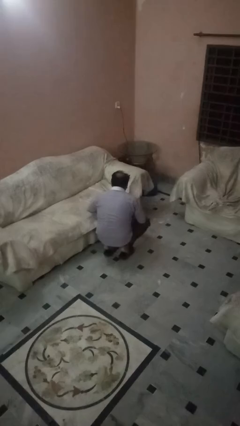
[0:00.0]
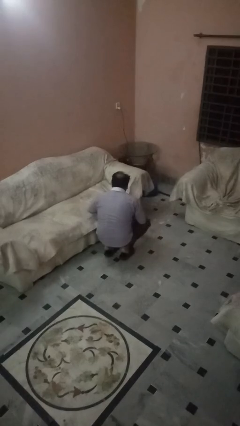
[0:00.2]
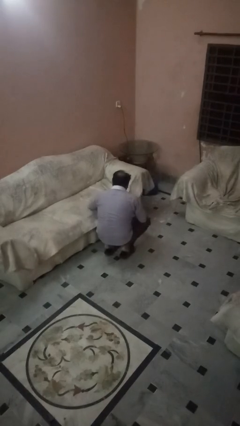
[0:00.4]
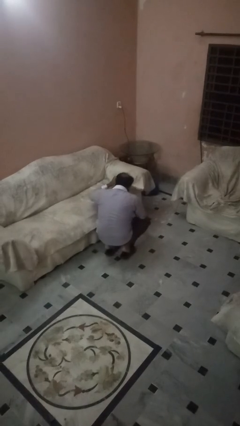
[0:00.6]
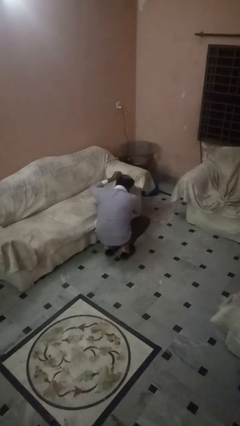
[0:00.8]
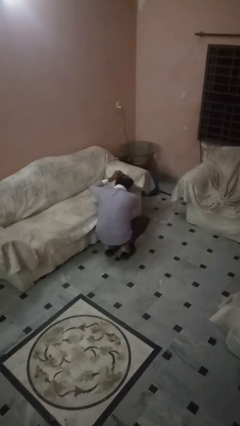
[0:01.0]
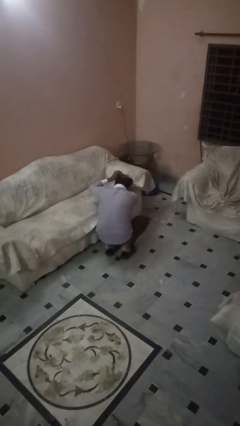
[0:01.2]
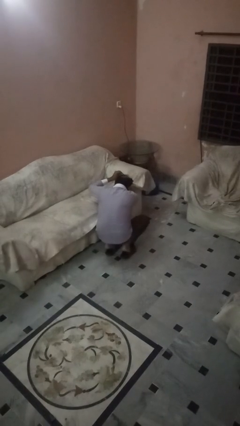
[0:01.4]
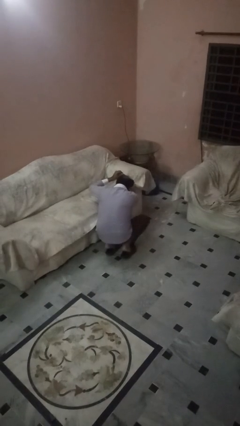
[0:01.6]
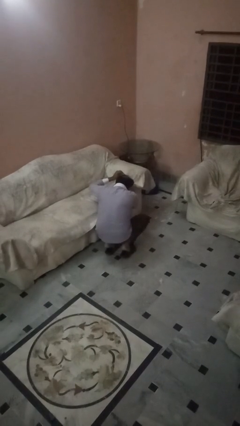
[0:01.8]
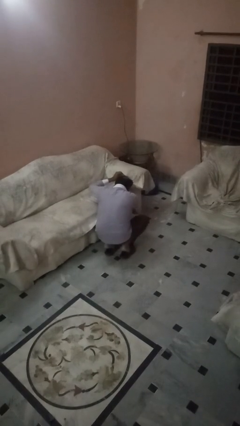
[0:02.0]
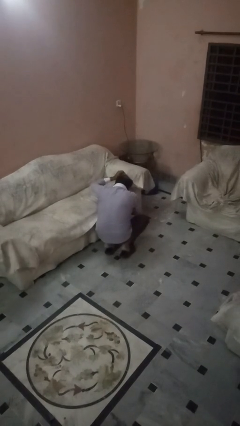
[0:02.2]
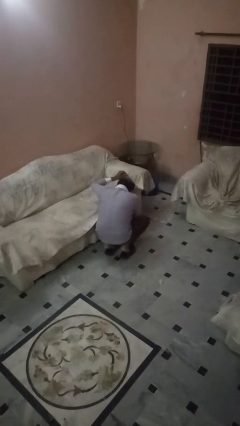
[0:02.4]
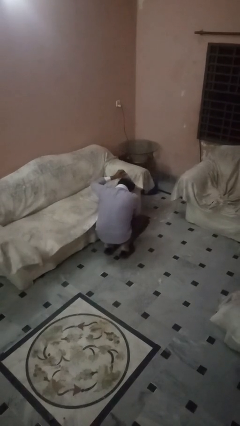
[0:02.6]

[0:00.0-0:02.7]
person searches in couch

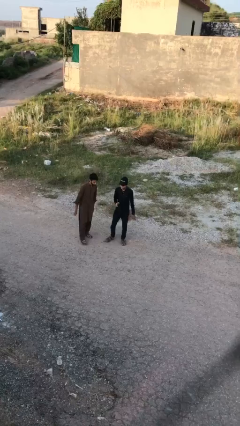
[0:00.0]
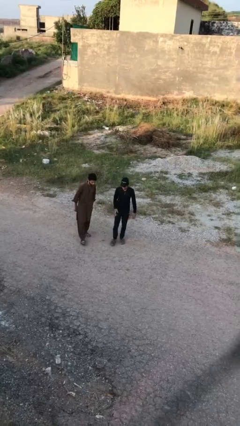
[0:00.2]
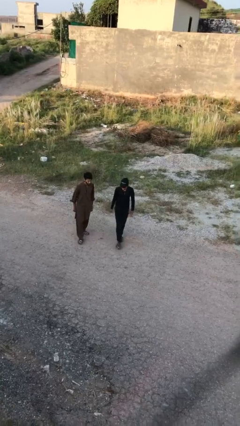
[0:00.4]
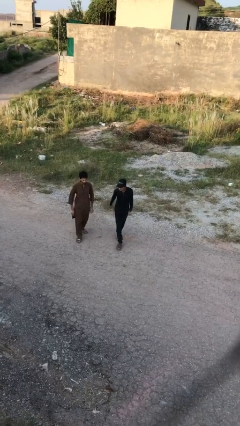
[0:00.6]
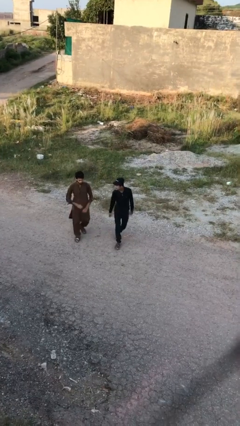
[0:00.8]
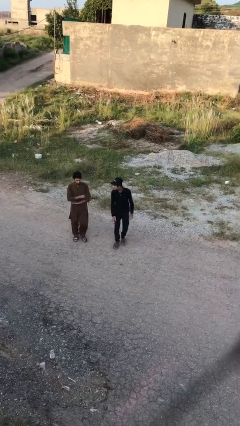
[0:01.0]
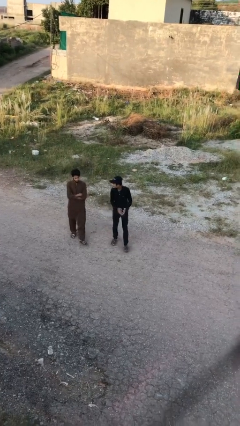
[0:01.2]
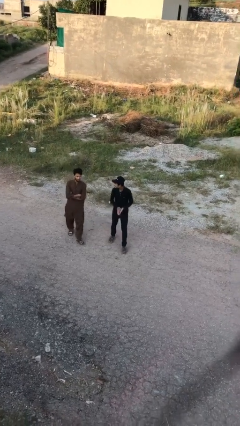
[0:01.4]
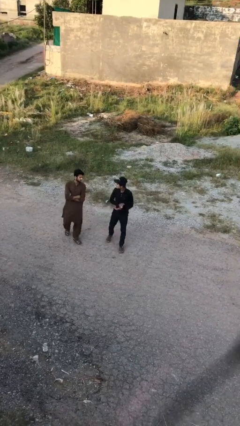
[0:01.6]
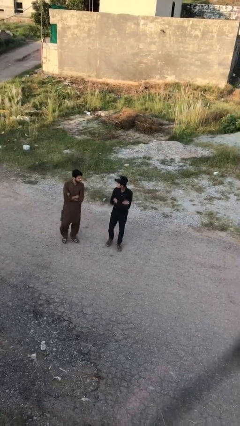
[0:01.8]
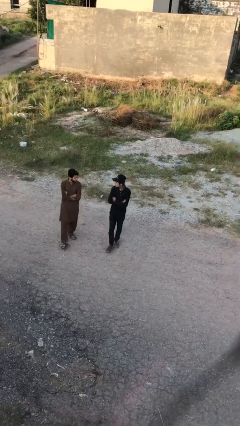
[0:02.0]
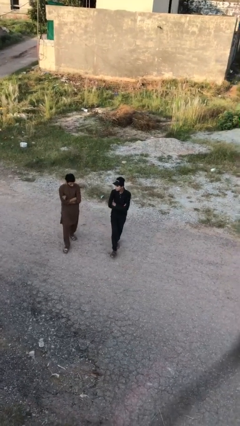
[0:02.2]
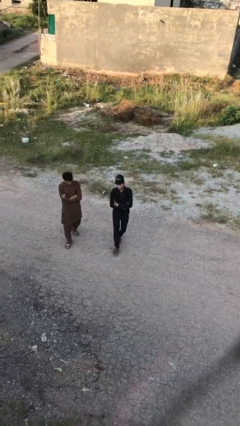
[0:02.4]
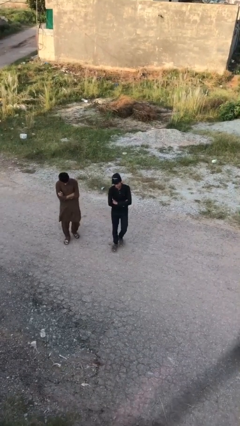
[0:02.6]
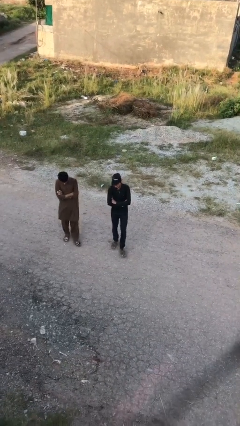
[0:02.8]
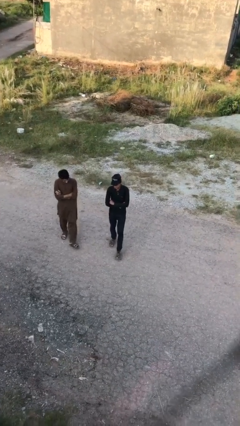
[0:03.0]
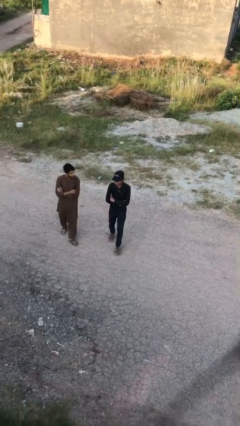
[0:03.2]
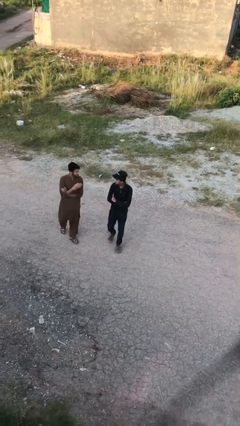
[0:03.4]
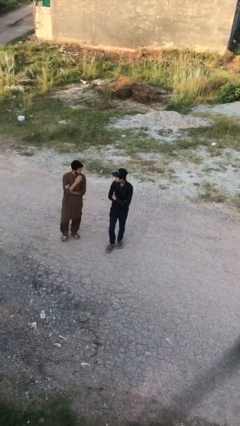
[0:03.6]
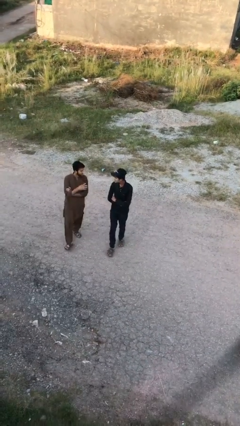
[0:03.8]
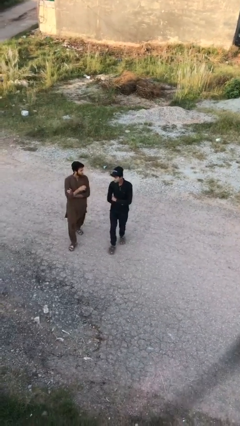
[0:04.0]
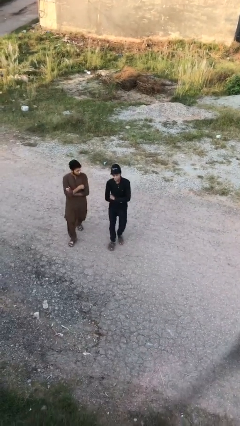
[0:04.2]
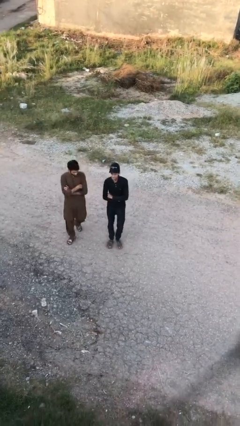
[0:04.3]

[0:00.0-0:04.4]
person talks to person

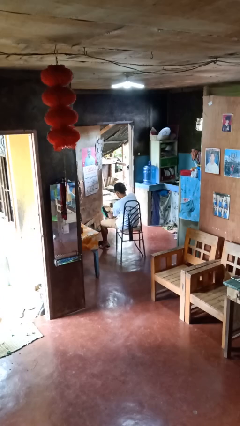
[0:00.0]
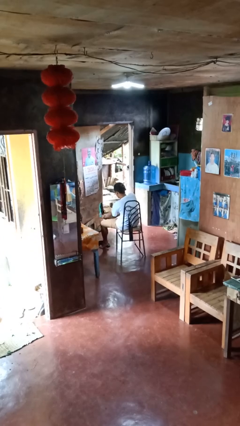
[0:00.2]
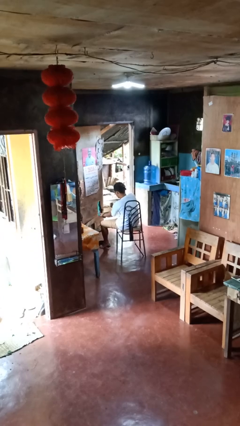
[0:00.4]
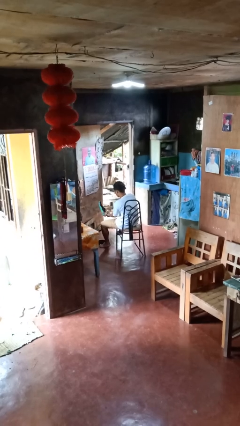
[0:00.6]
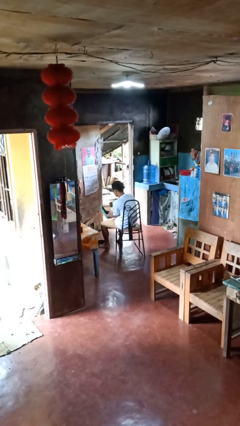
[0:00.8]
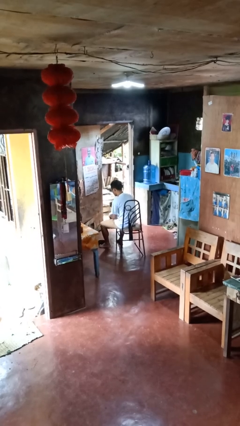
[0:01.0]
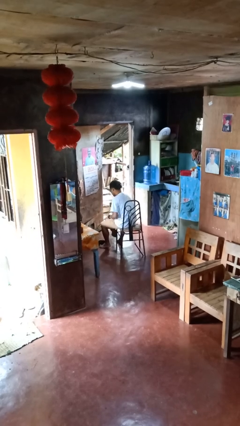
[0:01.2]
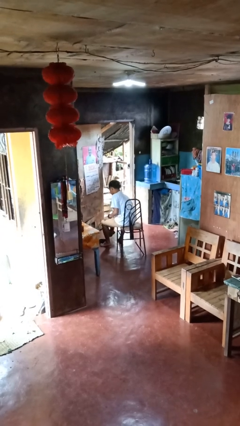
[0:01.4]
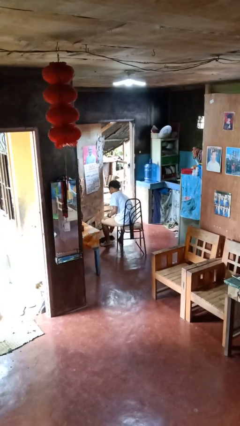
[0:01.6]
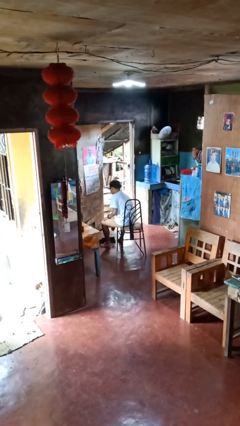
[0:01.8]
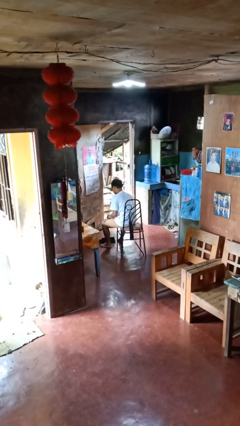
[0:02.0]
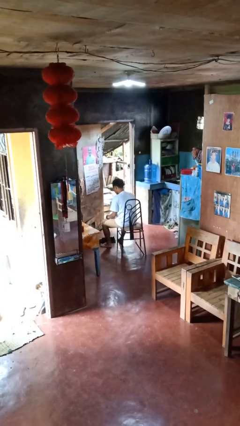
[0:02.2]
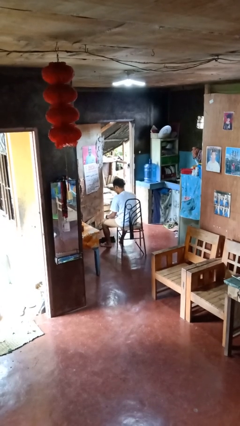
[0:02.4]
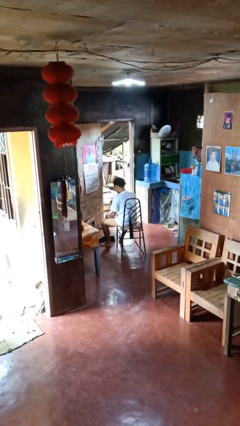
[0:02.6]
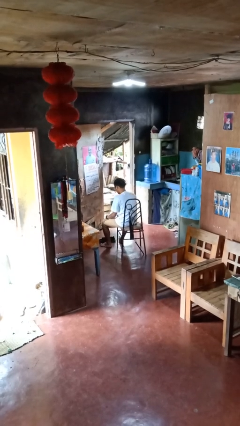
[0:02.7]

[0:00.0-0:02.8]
person takes off shoes

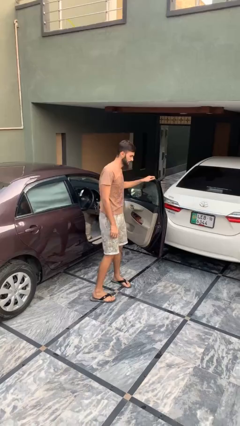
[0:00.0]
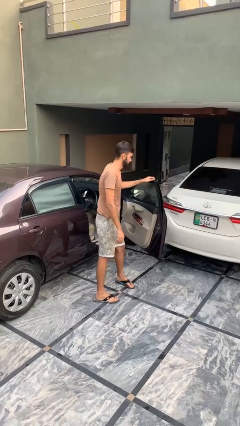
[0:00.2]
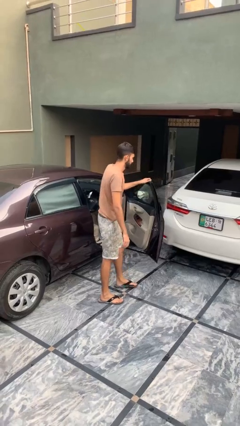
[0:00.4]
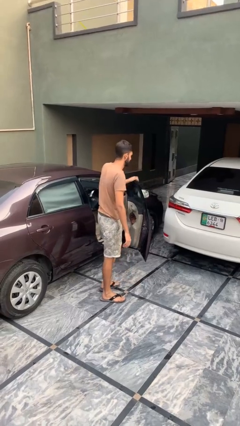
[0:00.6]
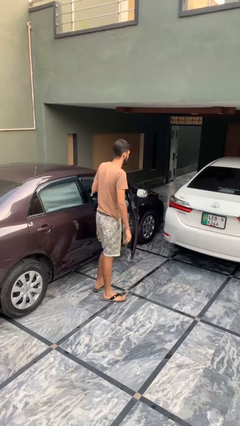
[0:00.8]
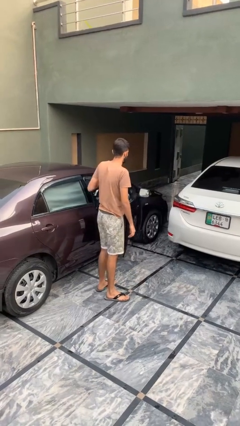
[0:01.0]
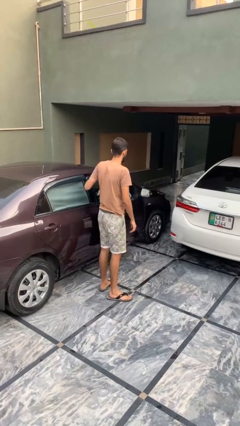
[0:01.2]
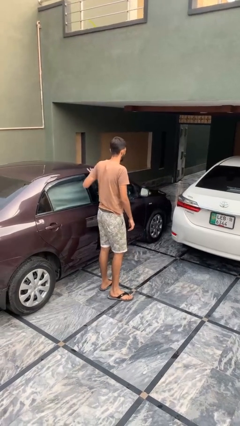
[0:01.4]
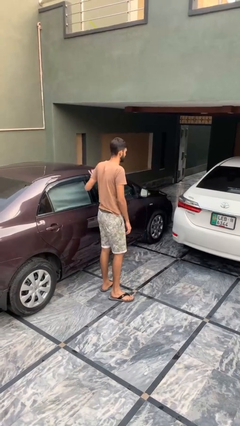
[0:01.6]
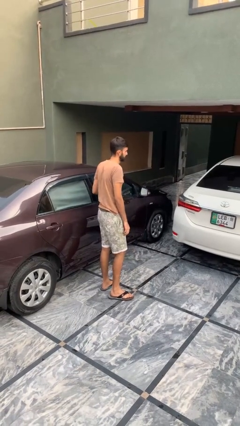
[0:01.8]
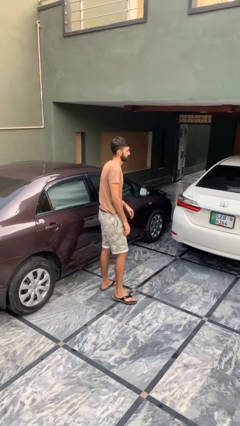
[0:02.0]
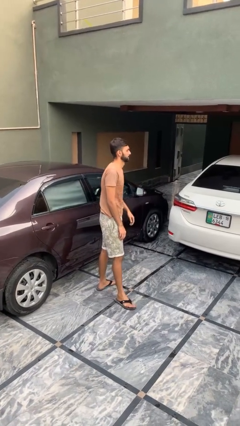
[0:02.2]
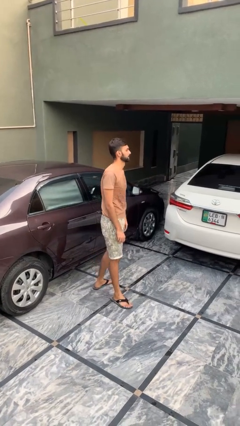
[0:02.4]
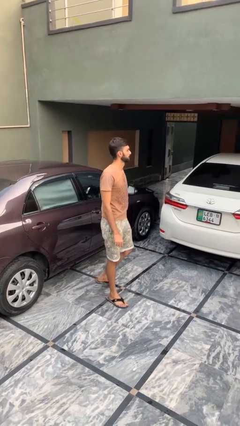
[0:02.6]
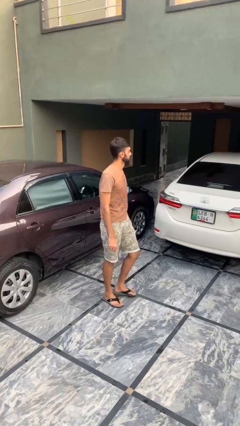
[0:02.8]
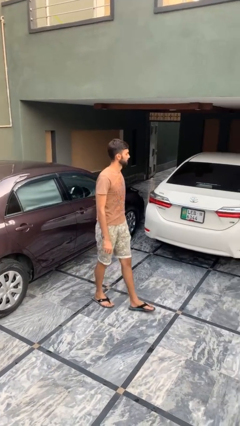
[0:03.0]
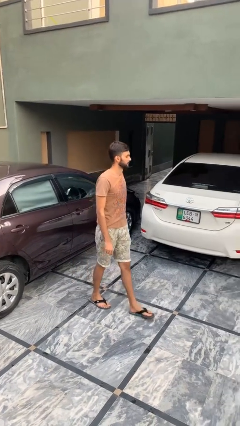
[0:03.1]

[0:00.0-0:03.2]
person closes car door

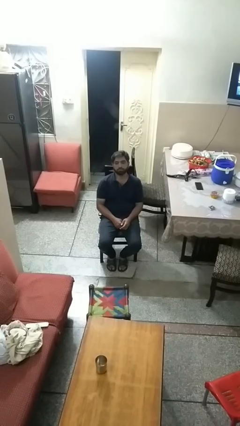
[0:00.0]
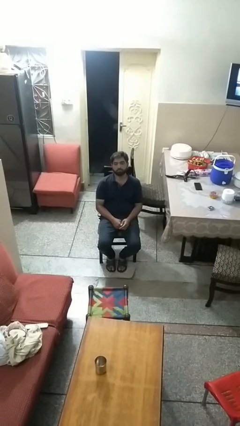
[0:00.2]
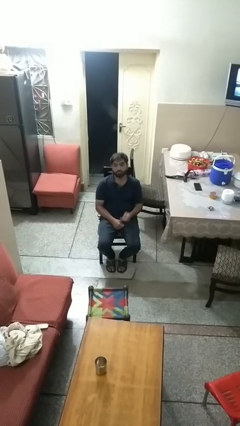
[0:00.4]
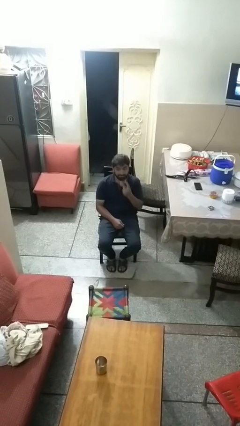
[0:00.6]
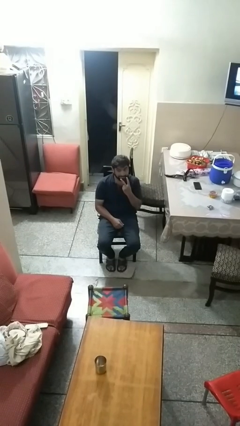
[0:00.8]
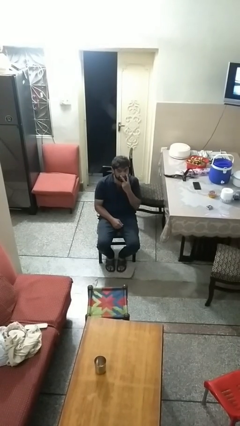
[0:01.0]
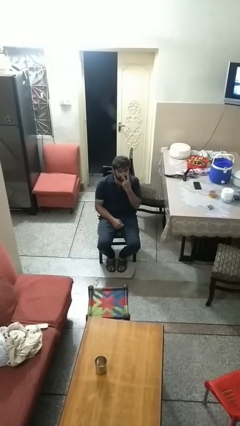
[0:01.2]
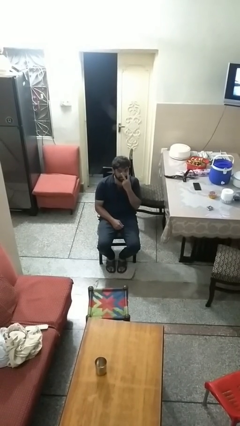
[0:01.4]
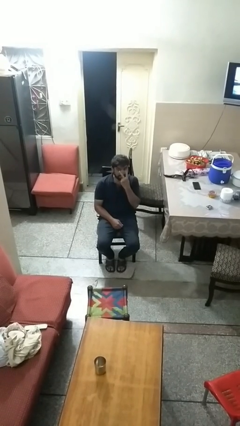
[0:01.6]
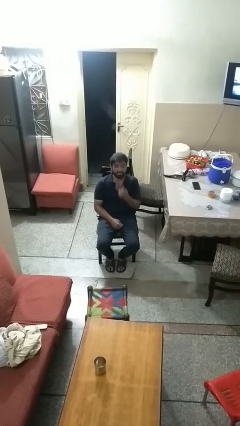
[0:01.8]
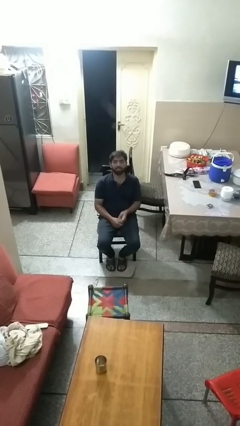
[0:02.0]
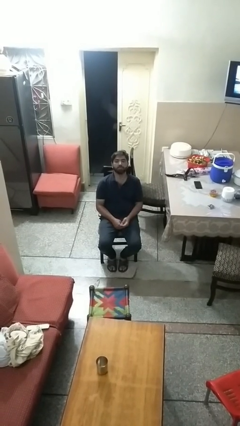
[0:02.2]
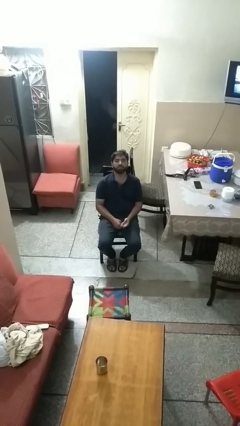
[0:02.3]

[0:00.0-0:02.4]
person gestures watch closely

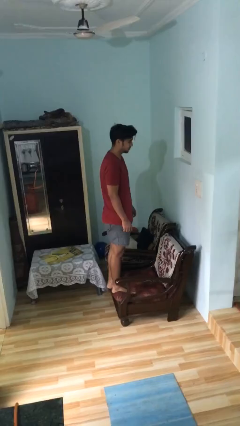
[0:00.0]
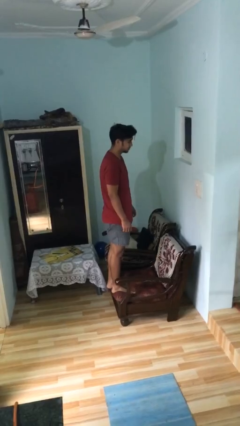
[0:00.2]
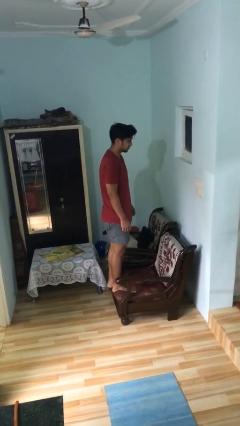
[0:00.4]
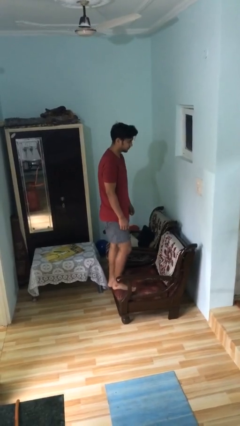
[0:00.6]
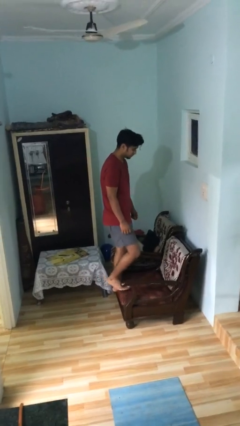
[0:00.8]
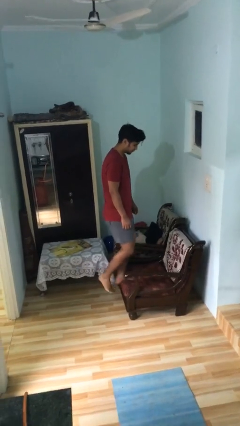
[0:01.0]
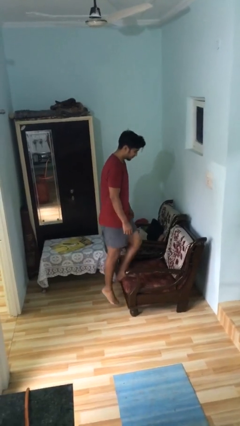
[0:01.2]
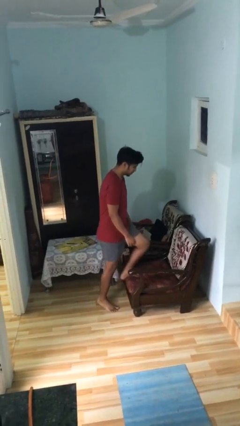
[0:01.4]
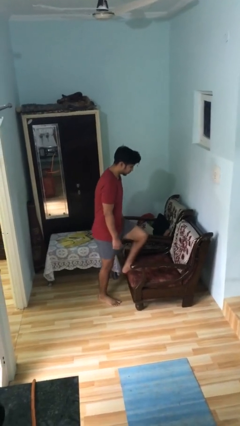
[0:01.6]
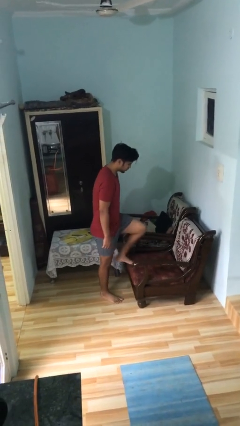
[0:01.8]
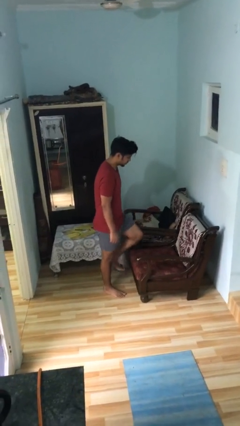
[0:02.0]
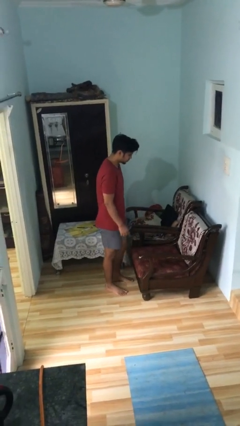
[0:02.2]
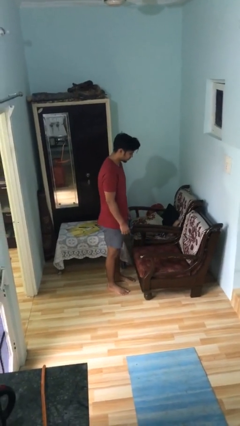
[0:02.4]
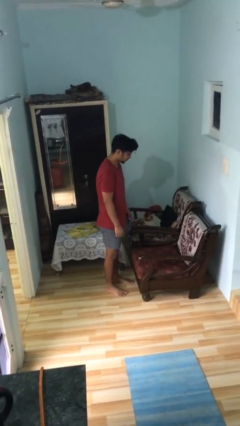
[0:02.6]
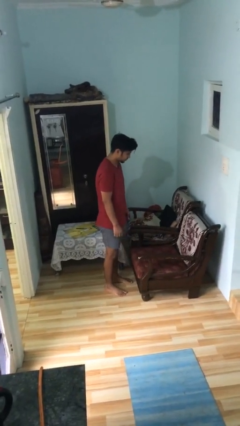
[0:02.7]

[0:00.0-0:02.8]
person climbs off couch
